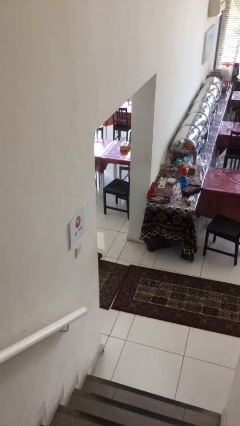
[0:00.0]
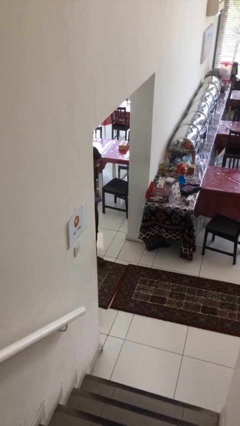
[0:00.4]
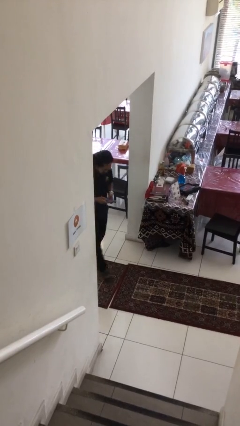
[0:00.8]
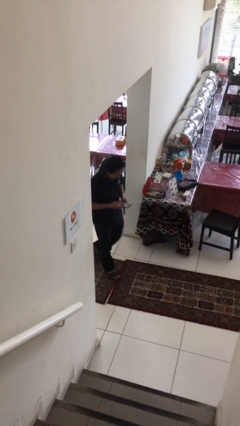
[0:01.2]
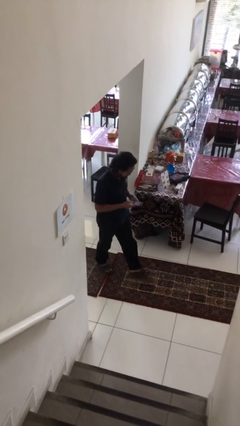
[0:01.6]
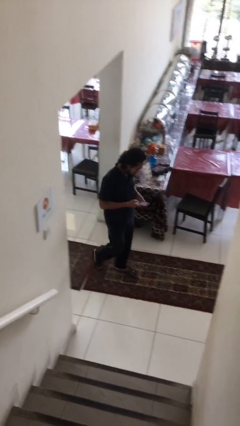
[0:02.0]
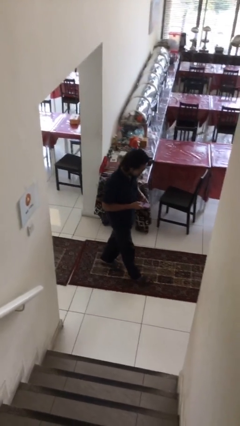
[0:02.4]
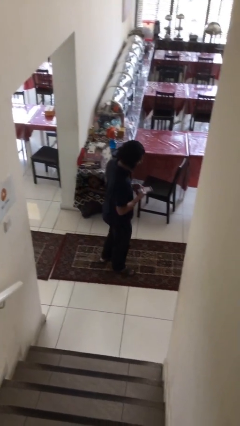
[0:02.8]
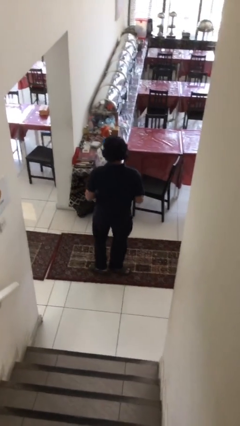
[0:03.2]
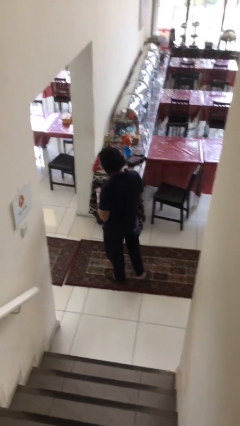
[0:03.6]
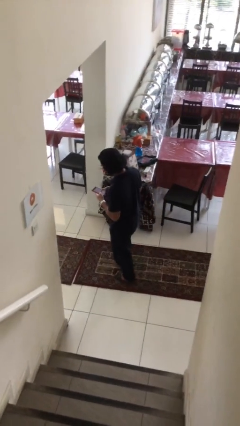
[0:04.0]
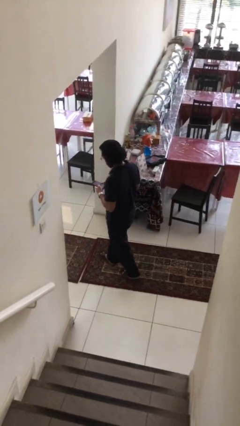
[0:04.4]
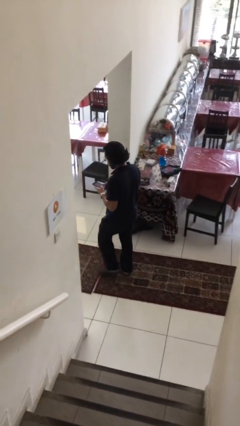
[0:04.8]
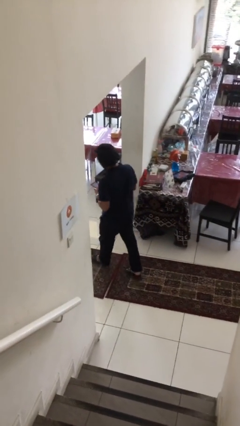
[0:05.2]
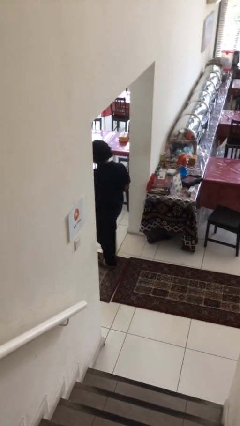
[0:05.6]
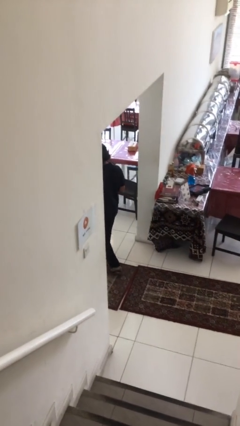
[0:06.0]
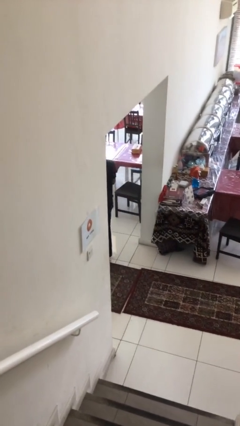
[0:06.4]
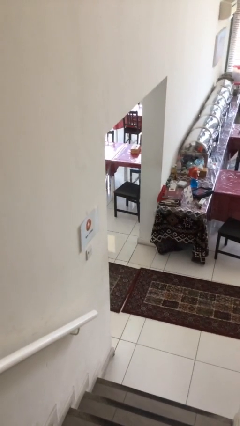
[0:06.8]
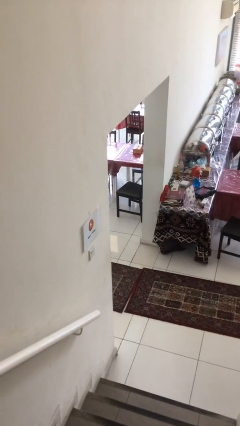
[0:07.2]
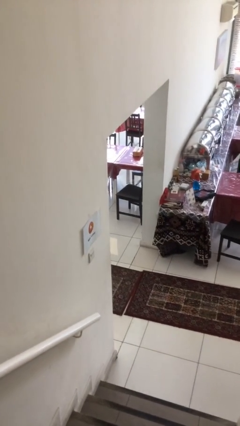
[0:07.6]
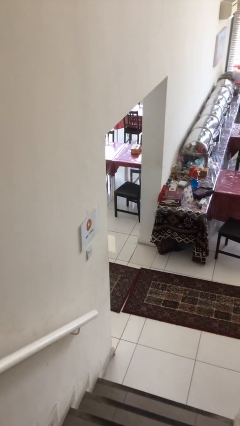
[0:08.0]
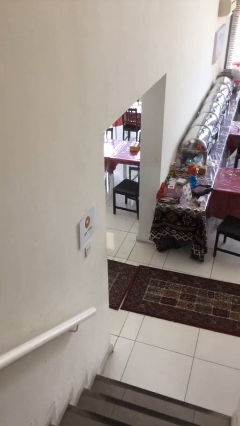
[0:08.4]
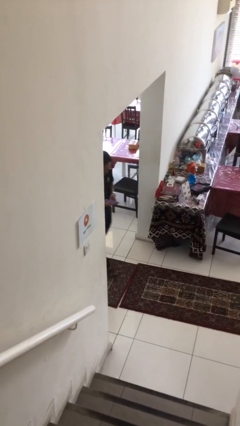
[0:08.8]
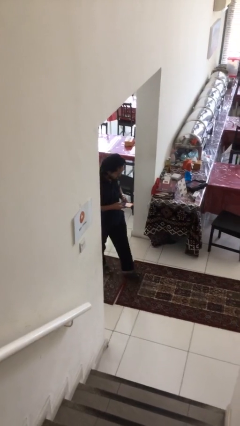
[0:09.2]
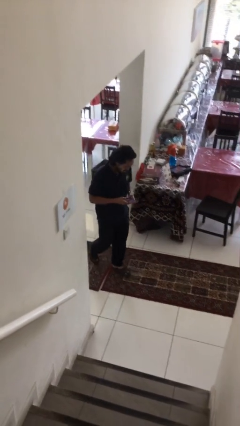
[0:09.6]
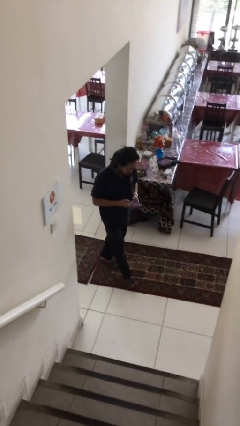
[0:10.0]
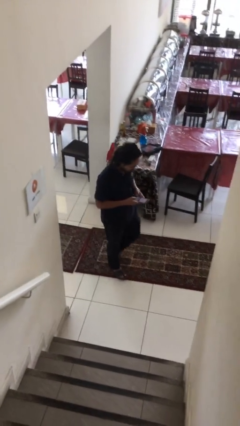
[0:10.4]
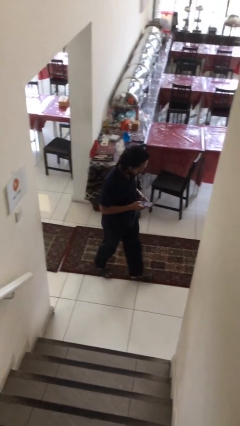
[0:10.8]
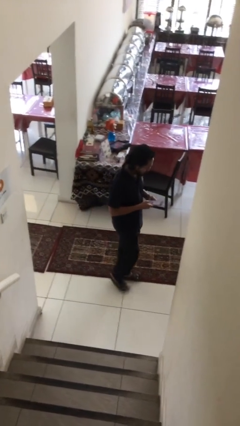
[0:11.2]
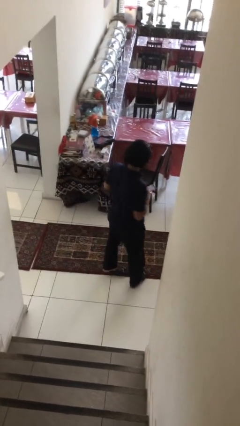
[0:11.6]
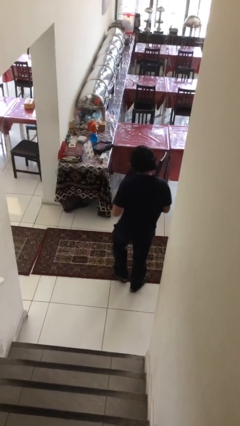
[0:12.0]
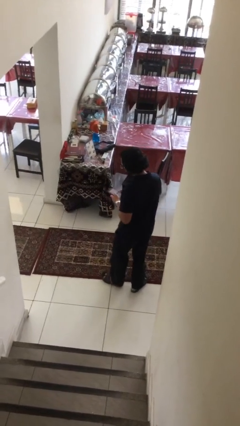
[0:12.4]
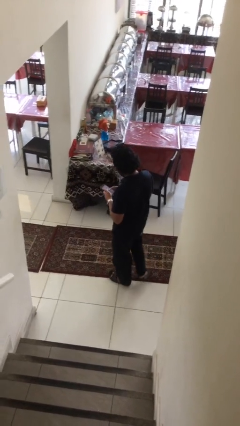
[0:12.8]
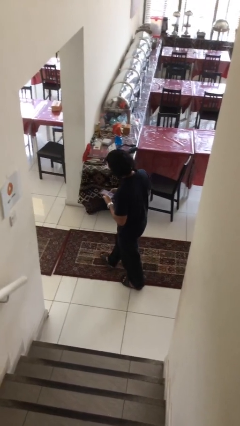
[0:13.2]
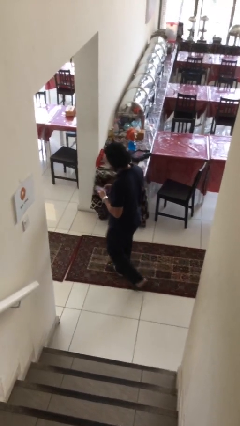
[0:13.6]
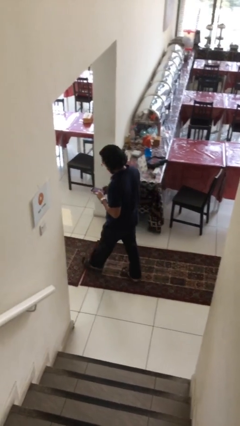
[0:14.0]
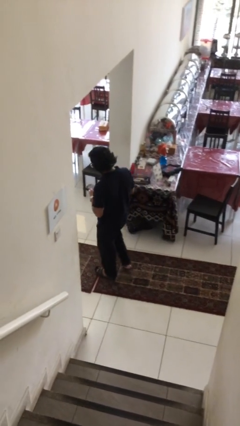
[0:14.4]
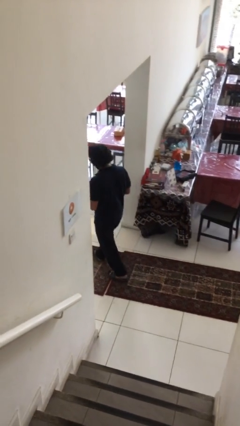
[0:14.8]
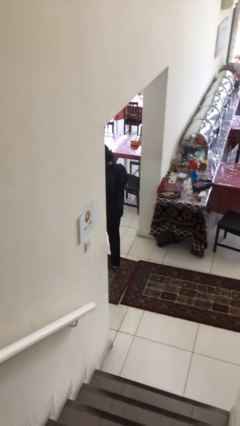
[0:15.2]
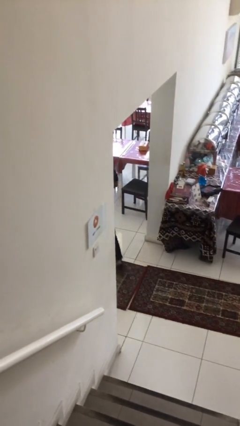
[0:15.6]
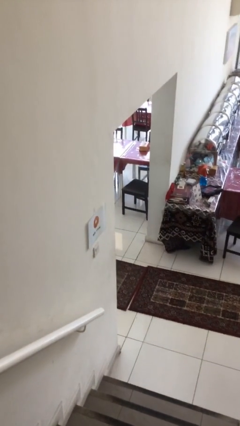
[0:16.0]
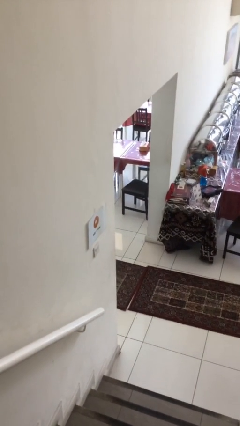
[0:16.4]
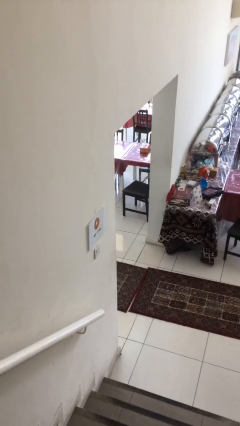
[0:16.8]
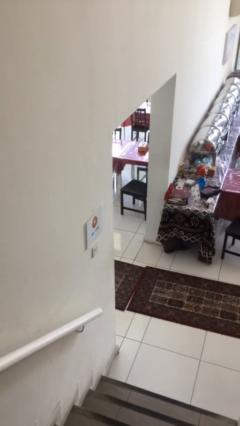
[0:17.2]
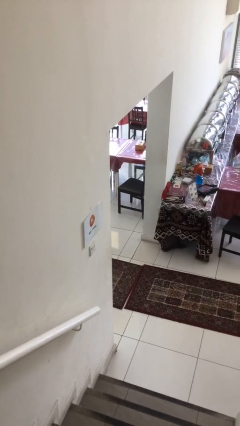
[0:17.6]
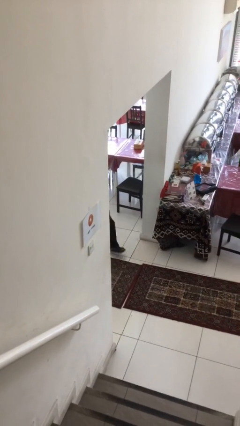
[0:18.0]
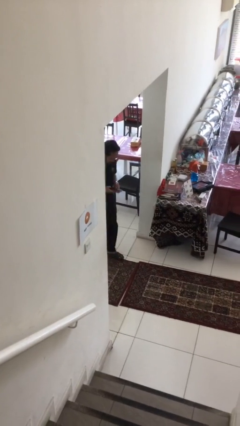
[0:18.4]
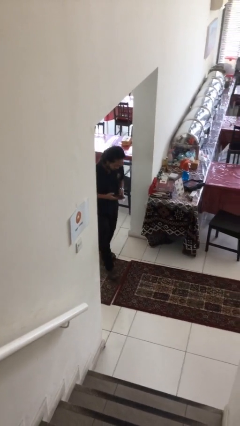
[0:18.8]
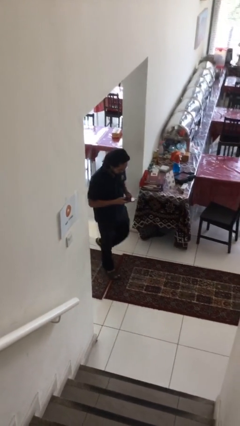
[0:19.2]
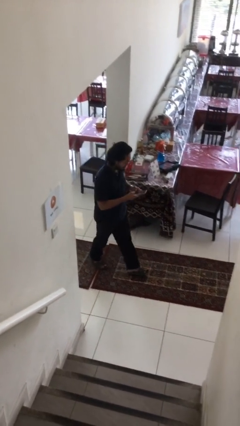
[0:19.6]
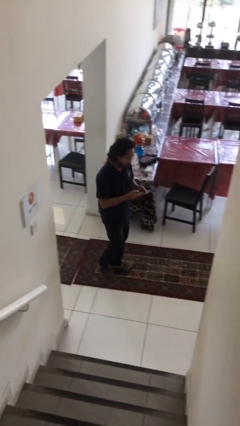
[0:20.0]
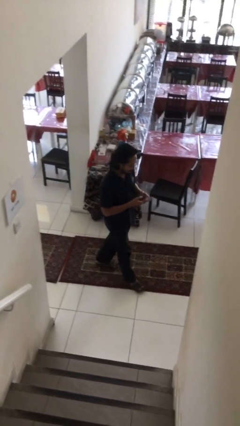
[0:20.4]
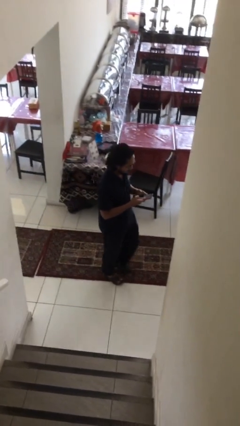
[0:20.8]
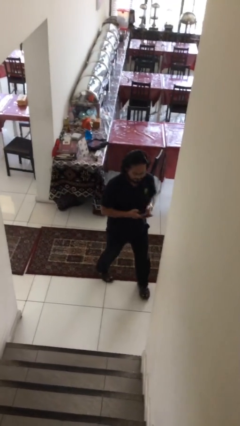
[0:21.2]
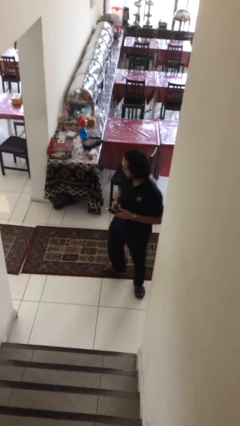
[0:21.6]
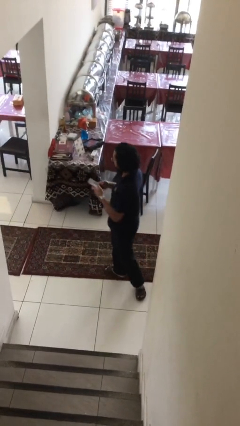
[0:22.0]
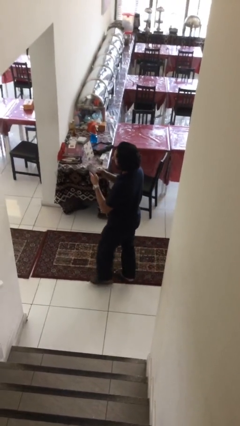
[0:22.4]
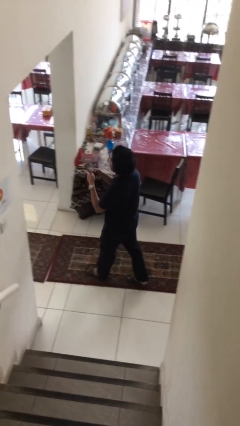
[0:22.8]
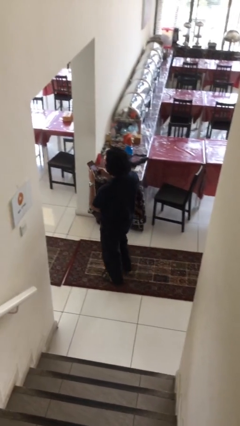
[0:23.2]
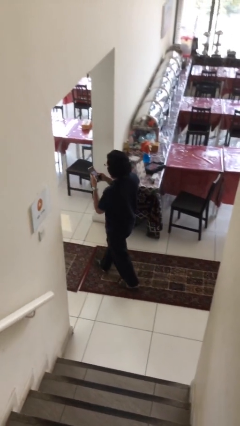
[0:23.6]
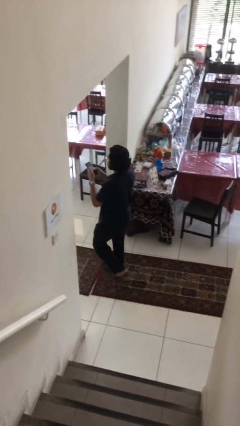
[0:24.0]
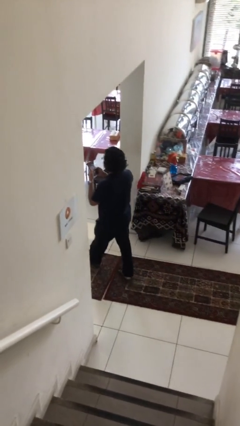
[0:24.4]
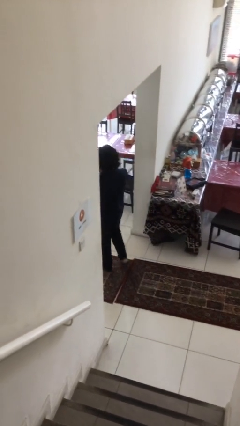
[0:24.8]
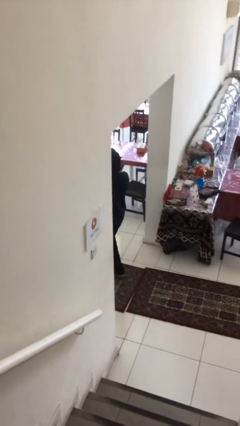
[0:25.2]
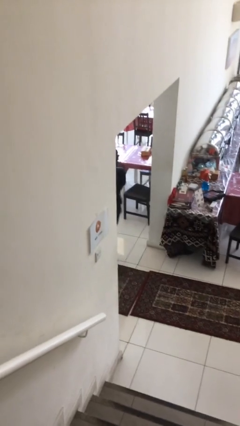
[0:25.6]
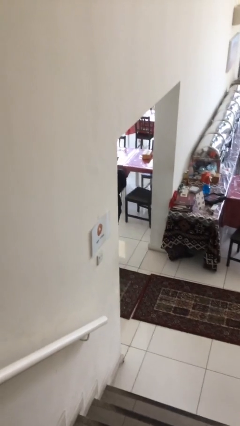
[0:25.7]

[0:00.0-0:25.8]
person texts on phone

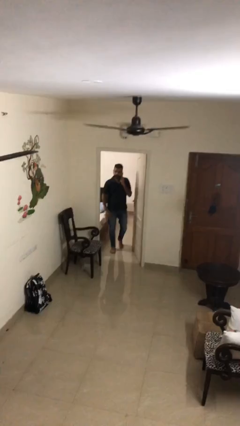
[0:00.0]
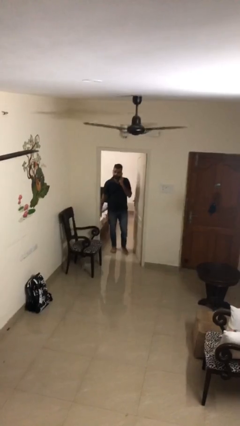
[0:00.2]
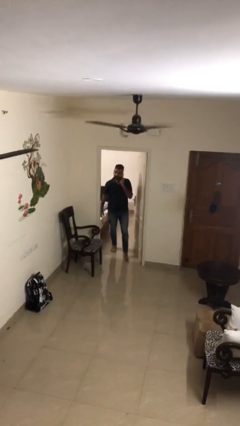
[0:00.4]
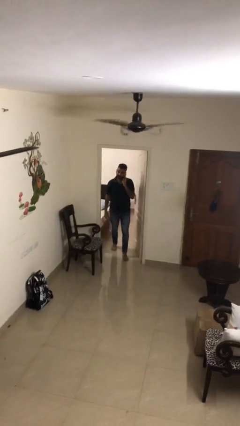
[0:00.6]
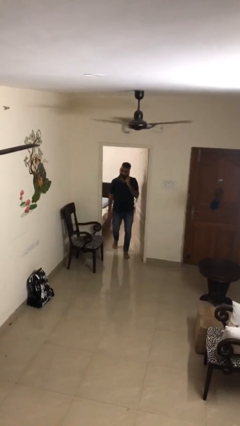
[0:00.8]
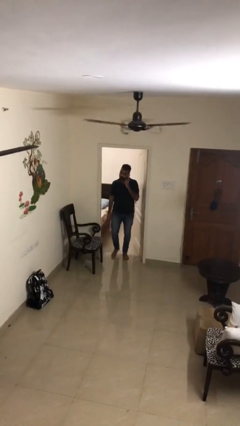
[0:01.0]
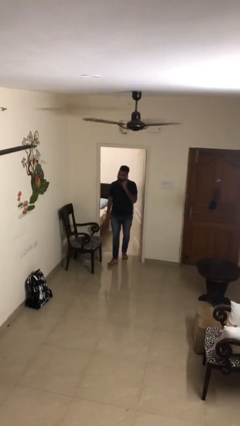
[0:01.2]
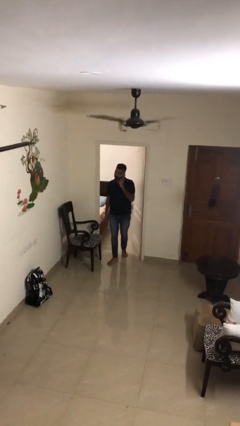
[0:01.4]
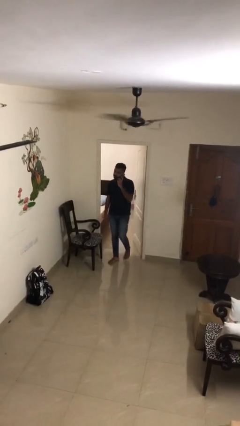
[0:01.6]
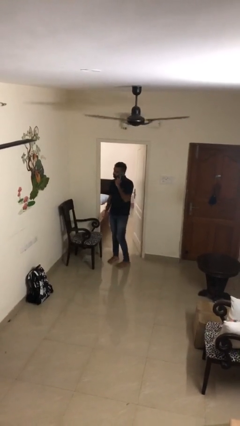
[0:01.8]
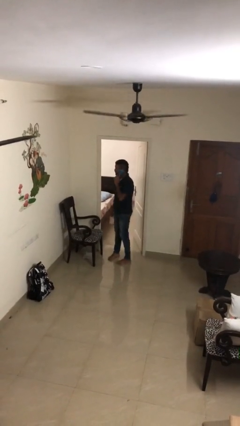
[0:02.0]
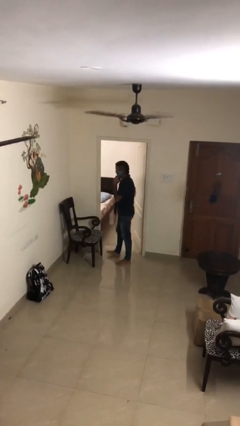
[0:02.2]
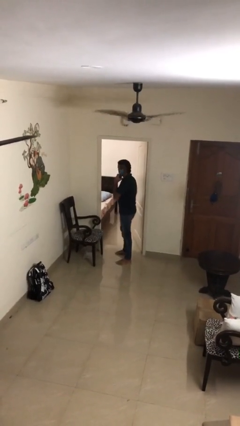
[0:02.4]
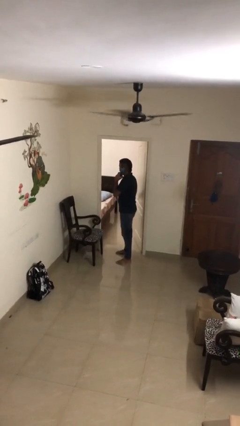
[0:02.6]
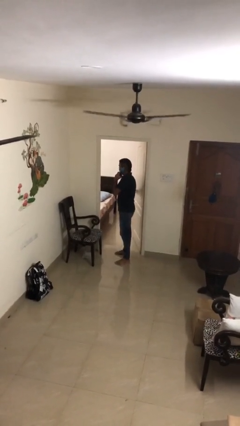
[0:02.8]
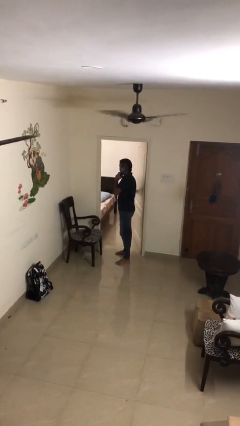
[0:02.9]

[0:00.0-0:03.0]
person enters scene through structure

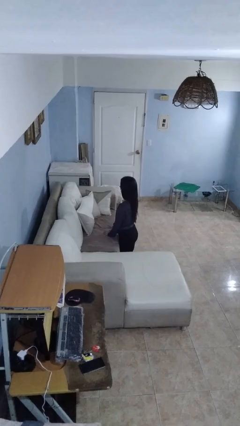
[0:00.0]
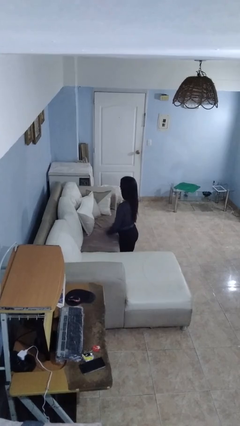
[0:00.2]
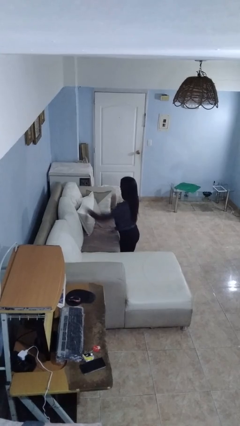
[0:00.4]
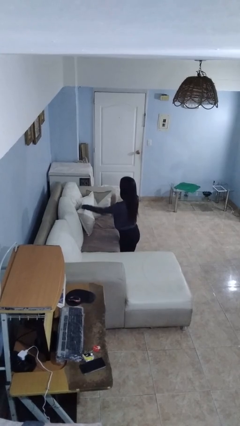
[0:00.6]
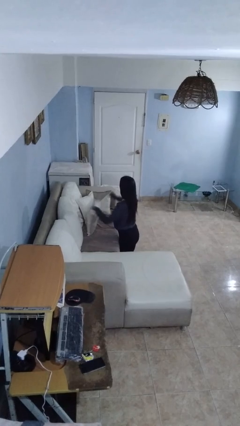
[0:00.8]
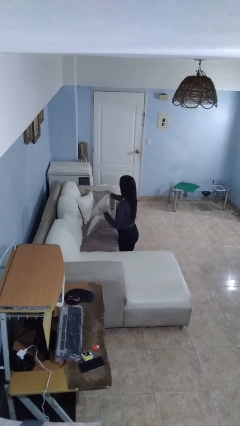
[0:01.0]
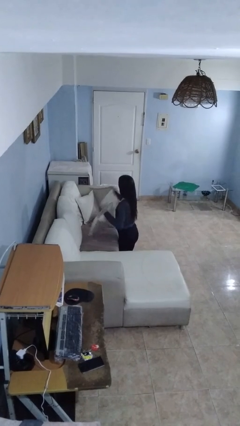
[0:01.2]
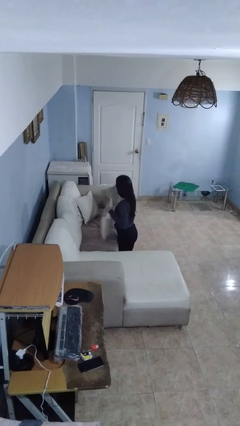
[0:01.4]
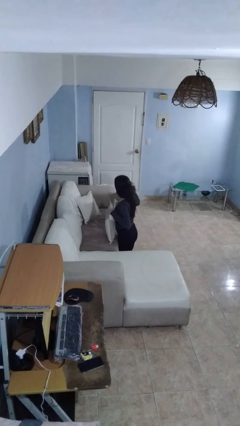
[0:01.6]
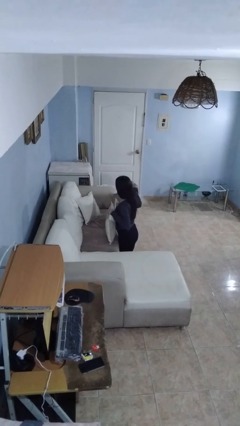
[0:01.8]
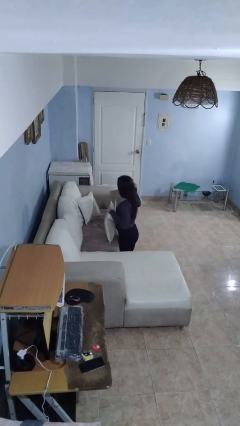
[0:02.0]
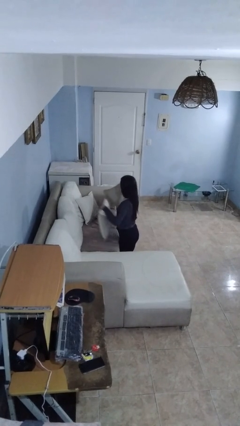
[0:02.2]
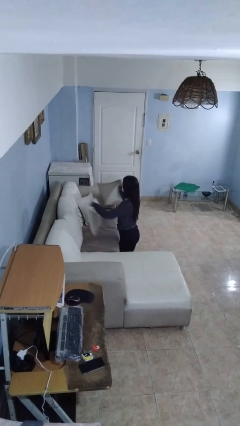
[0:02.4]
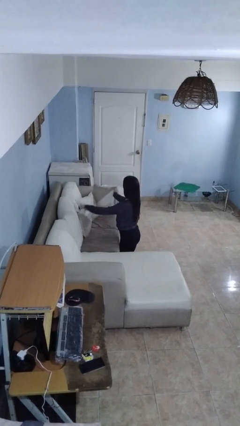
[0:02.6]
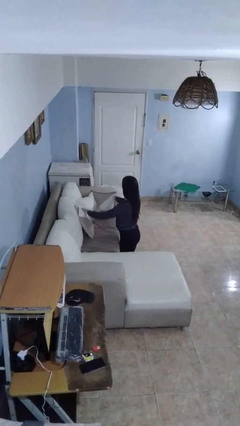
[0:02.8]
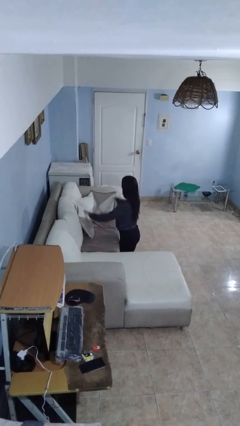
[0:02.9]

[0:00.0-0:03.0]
person searches in couch
